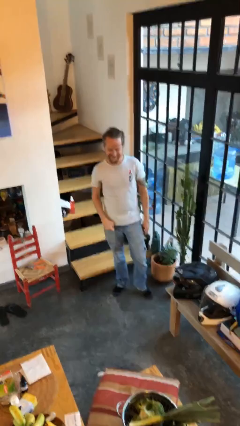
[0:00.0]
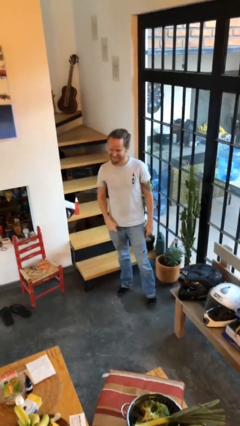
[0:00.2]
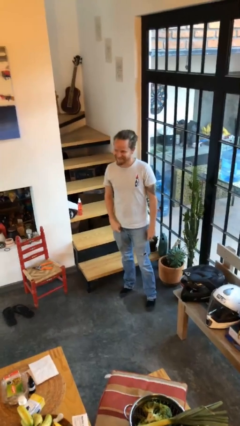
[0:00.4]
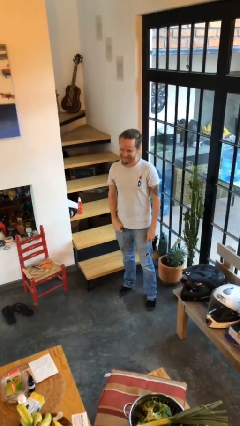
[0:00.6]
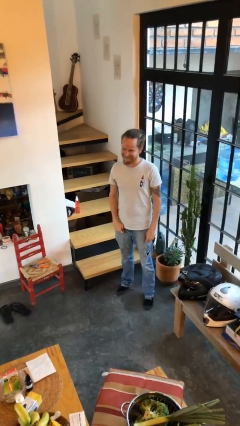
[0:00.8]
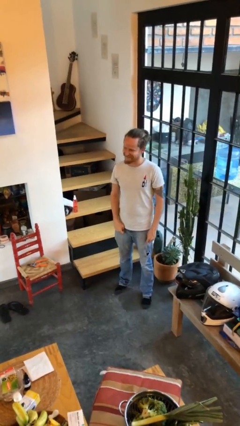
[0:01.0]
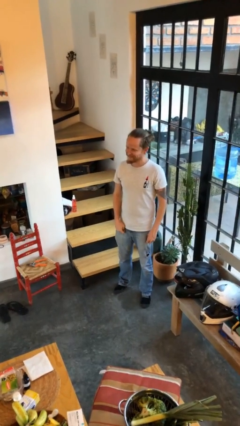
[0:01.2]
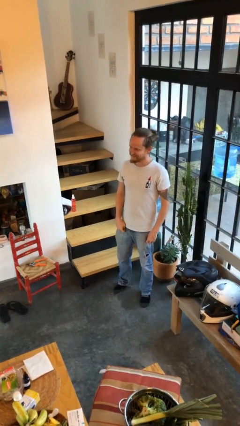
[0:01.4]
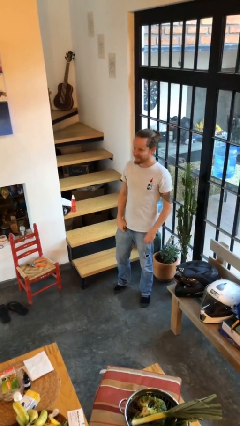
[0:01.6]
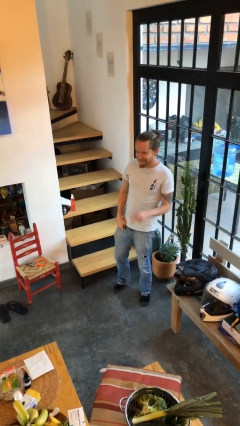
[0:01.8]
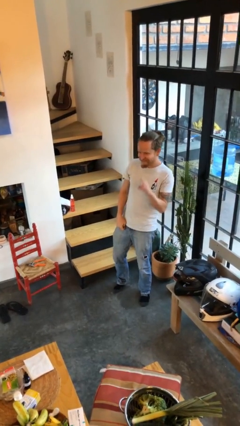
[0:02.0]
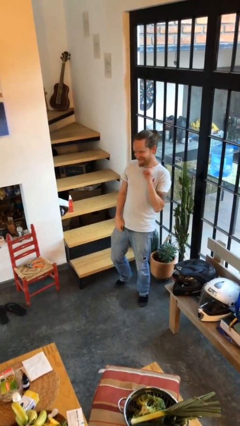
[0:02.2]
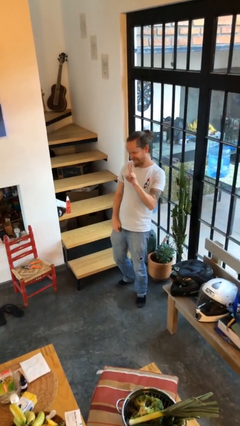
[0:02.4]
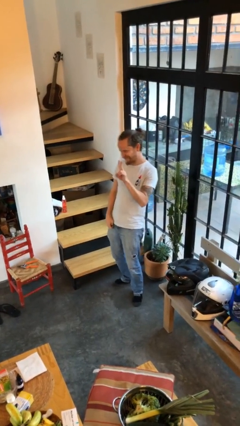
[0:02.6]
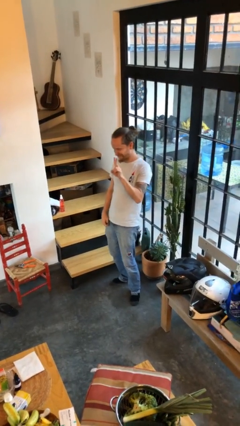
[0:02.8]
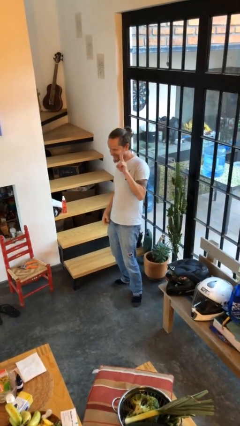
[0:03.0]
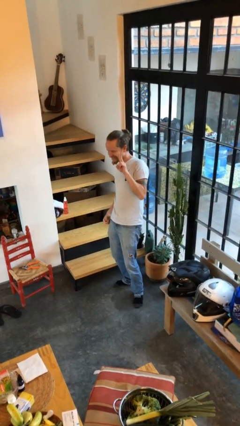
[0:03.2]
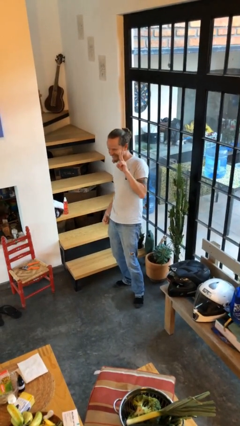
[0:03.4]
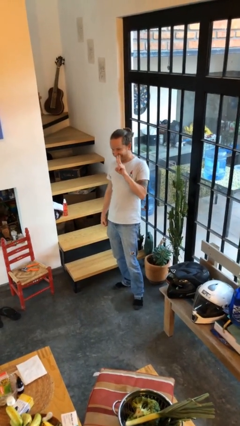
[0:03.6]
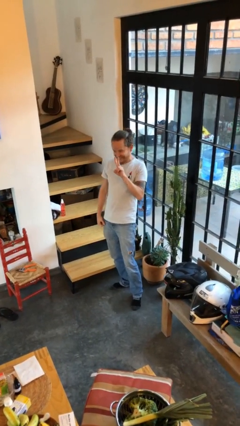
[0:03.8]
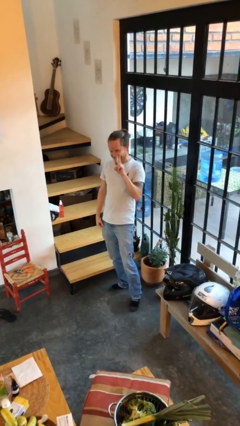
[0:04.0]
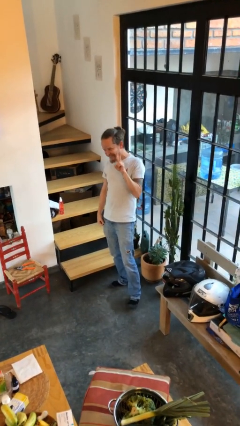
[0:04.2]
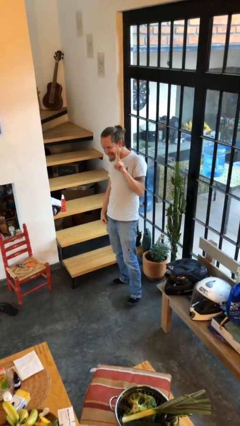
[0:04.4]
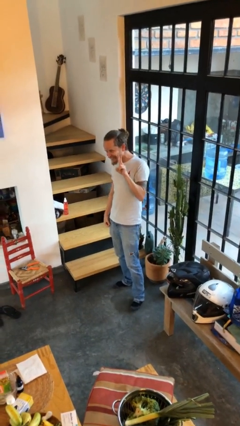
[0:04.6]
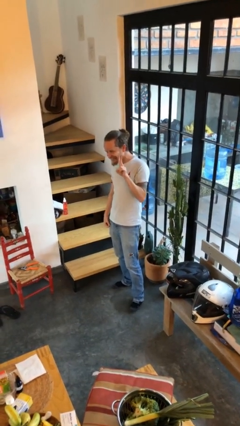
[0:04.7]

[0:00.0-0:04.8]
person gestures peace

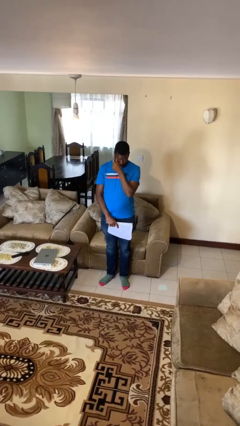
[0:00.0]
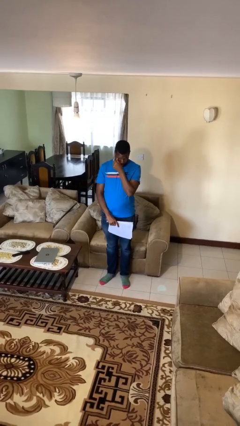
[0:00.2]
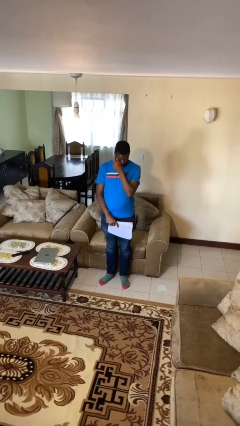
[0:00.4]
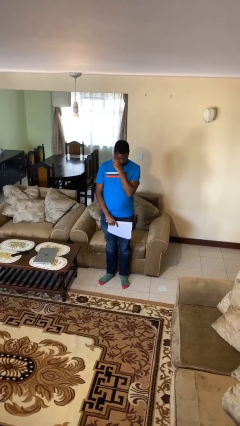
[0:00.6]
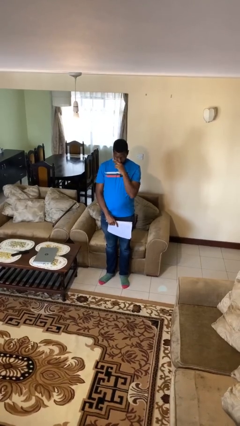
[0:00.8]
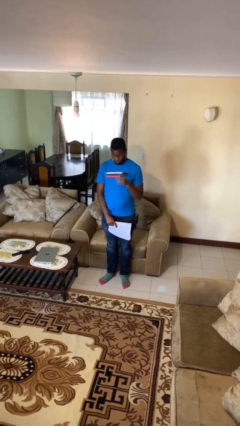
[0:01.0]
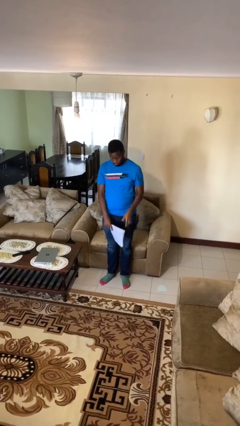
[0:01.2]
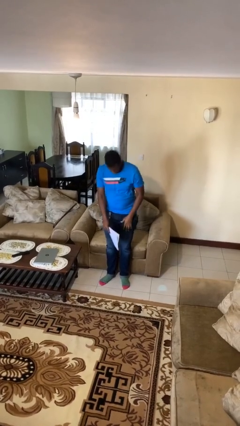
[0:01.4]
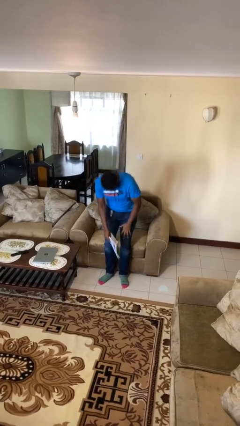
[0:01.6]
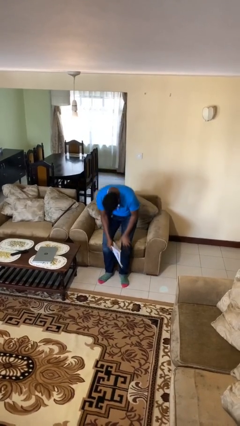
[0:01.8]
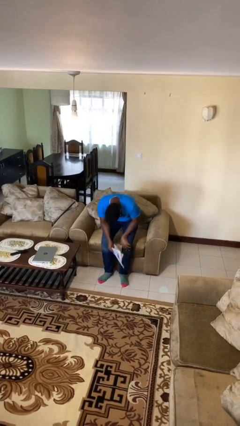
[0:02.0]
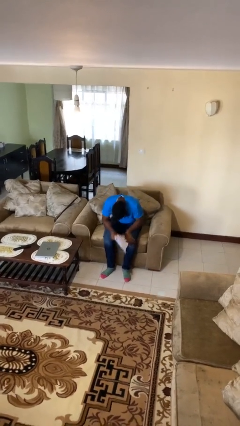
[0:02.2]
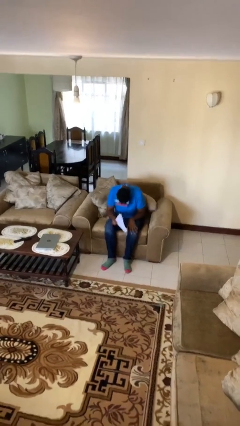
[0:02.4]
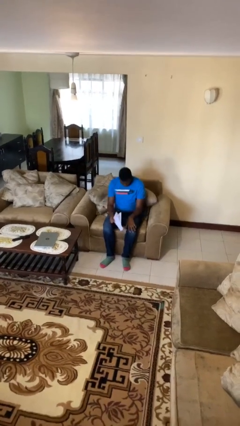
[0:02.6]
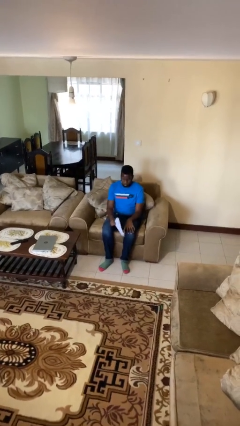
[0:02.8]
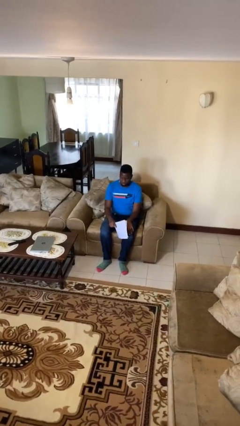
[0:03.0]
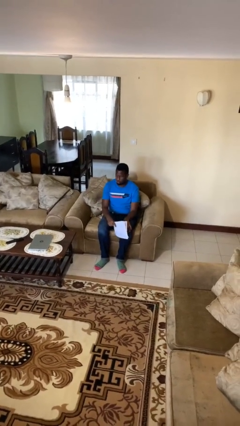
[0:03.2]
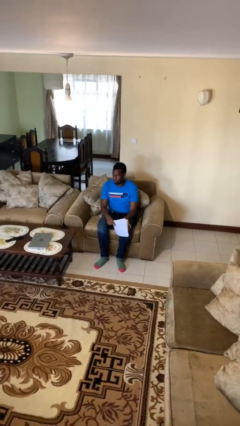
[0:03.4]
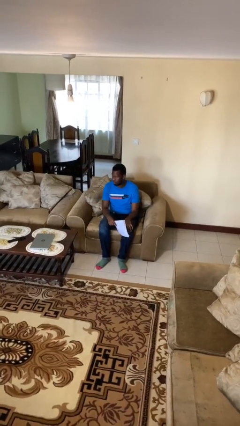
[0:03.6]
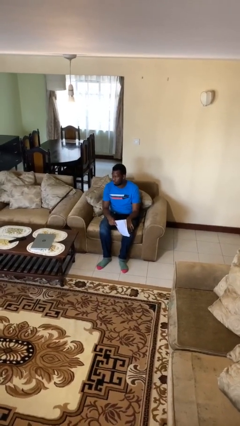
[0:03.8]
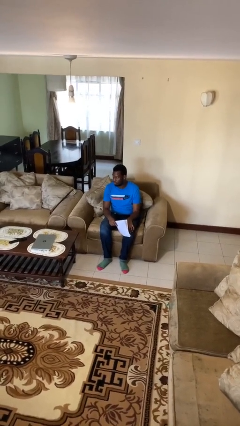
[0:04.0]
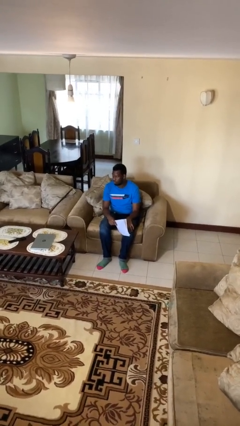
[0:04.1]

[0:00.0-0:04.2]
person sits down

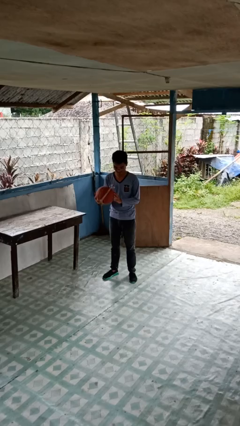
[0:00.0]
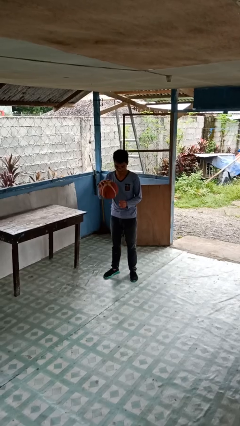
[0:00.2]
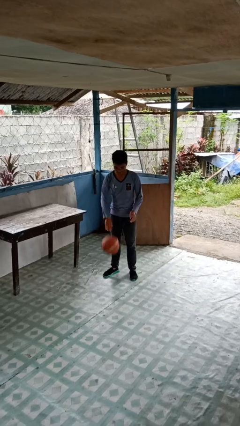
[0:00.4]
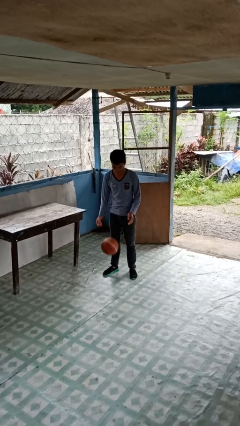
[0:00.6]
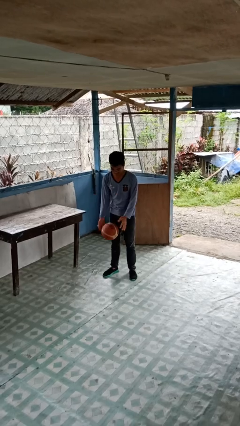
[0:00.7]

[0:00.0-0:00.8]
person bounces ball on floor

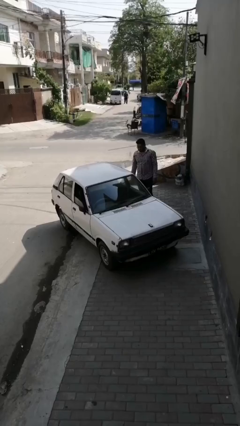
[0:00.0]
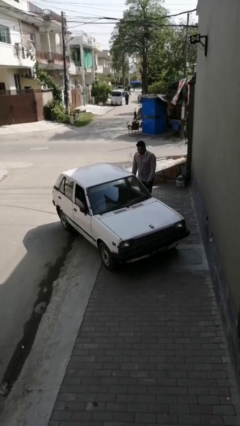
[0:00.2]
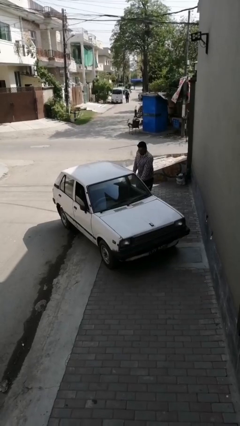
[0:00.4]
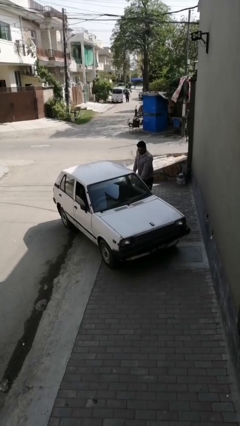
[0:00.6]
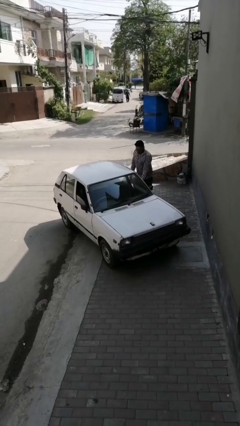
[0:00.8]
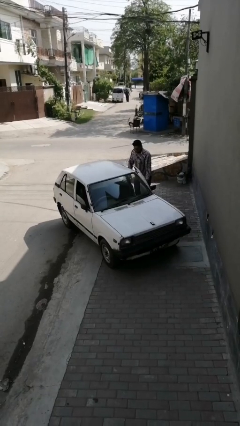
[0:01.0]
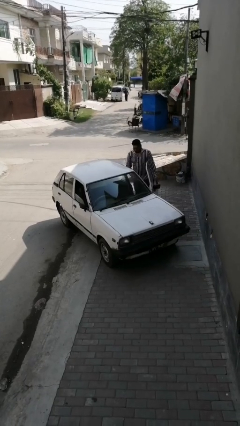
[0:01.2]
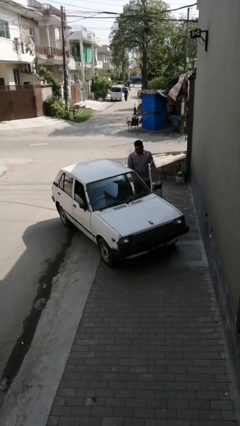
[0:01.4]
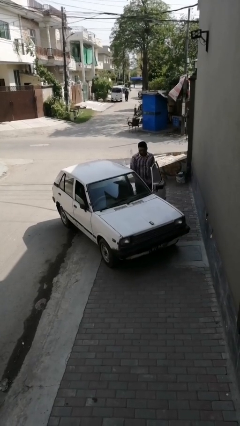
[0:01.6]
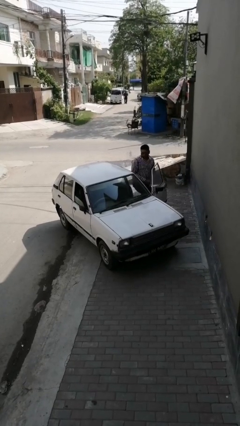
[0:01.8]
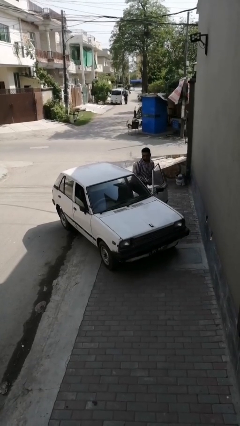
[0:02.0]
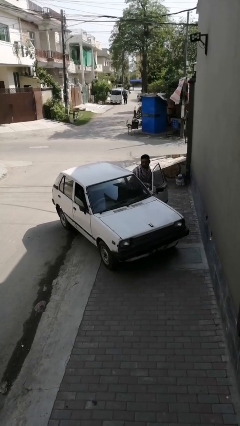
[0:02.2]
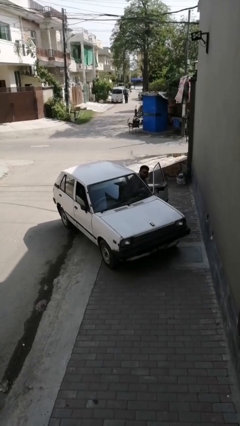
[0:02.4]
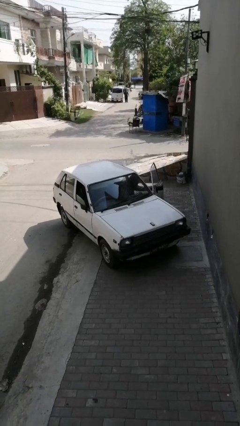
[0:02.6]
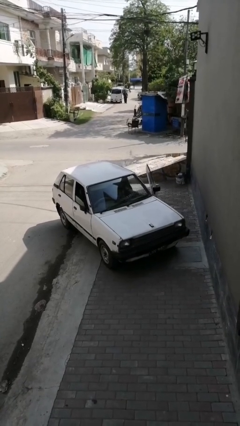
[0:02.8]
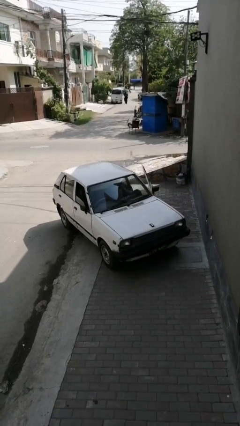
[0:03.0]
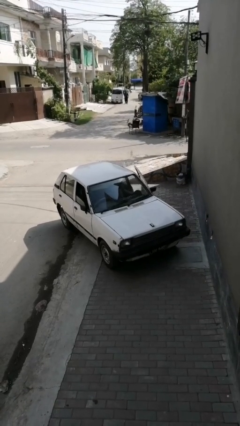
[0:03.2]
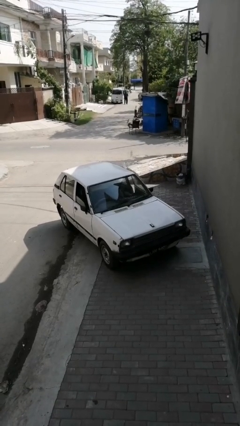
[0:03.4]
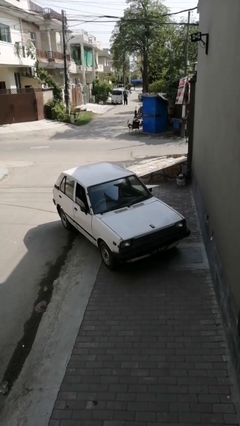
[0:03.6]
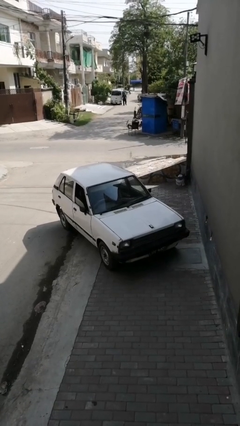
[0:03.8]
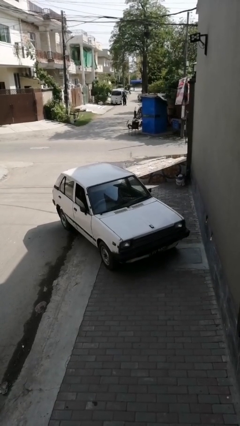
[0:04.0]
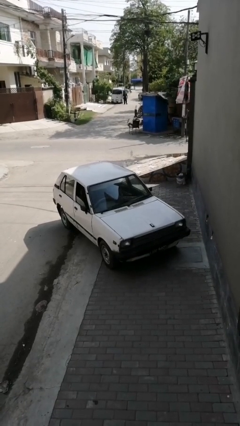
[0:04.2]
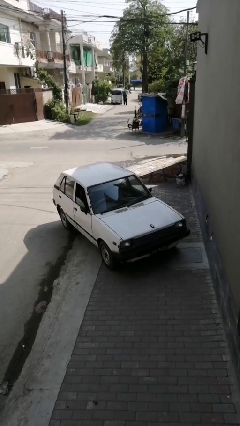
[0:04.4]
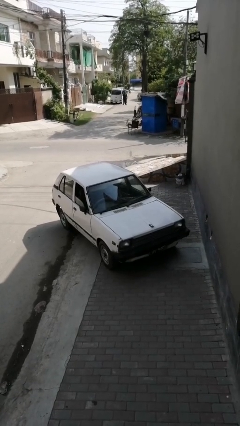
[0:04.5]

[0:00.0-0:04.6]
car picks up person

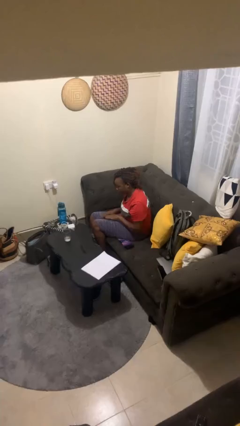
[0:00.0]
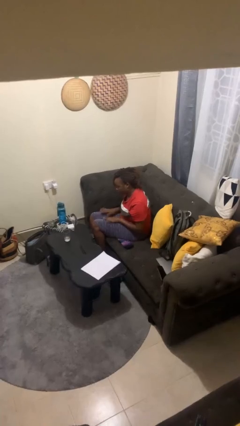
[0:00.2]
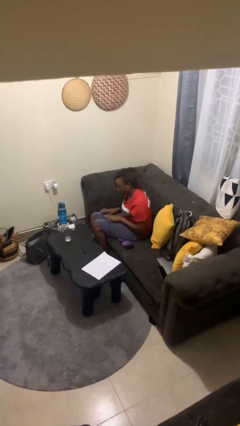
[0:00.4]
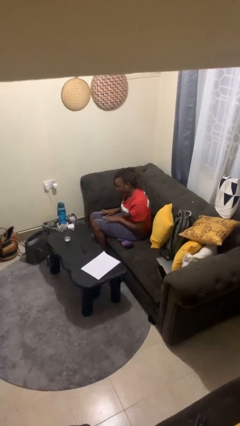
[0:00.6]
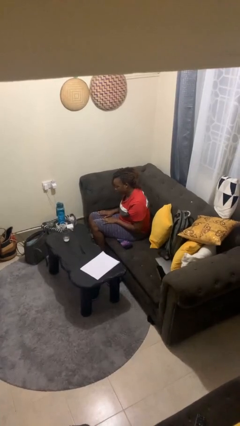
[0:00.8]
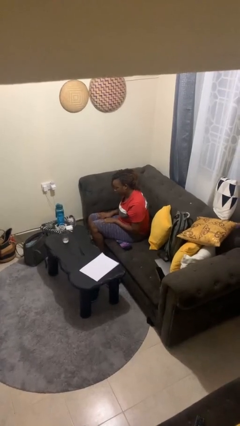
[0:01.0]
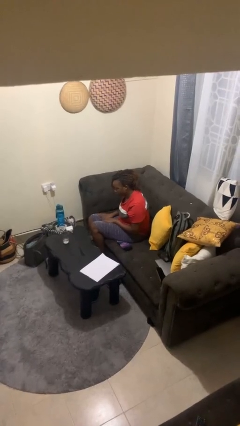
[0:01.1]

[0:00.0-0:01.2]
person slaps hands on thighs

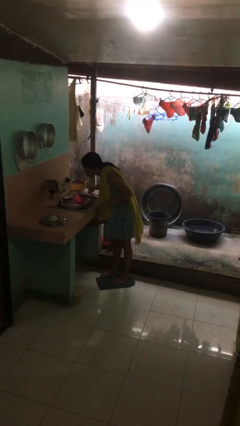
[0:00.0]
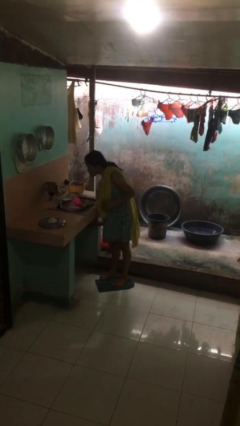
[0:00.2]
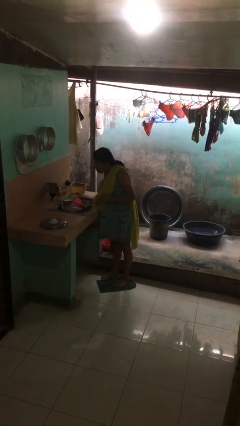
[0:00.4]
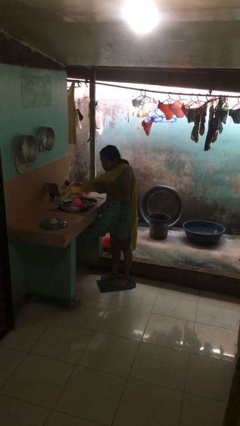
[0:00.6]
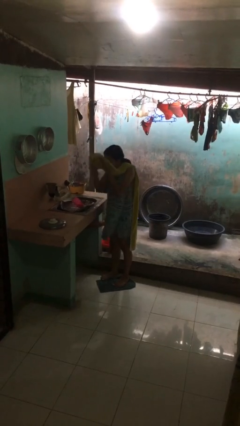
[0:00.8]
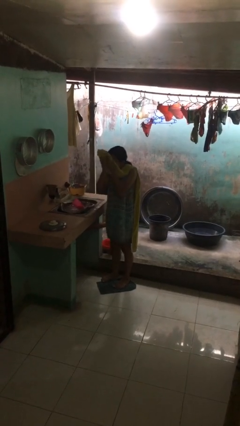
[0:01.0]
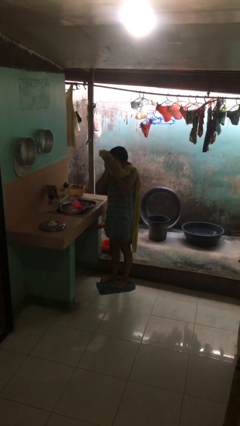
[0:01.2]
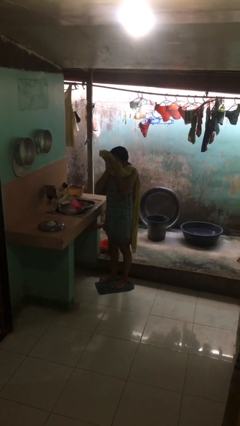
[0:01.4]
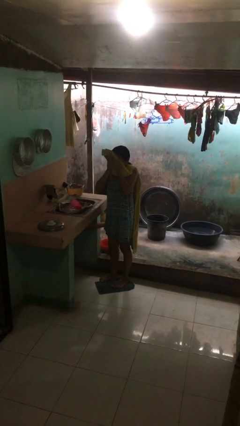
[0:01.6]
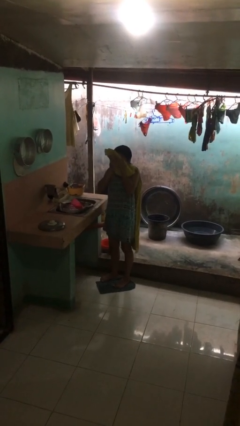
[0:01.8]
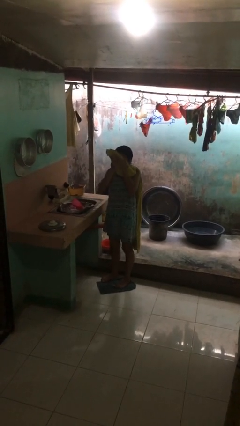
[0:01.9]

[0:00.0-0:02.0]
person dries face with towel
